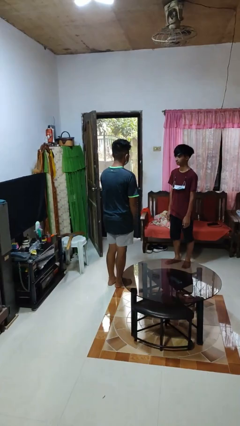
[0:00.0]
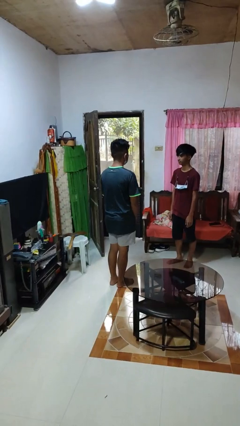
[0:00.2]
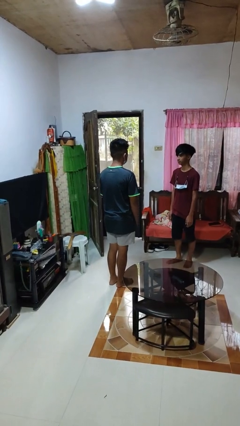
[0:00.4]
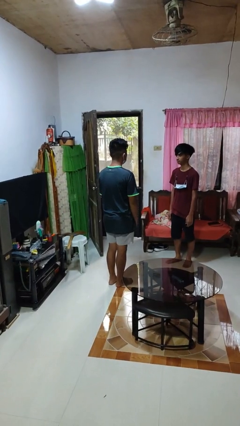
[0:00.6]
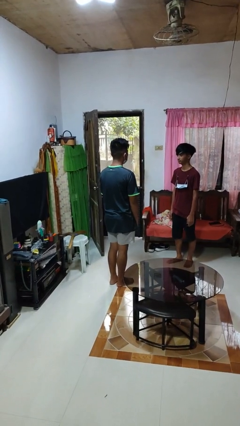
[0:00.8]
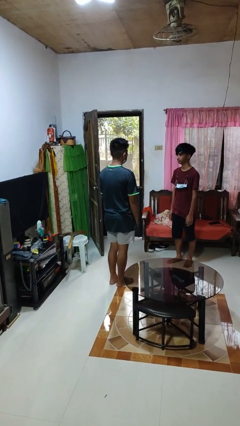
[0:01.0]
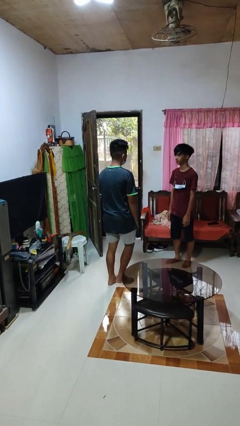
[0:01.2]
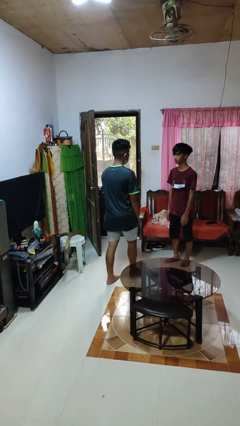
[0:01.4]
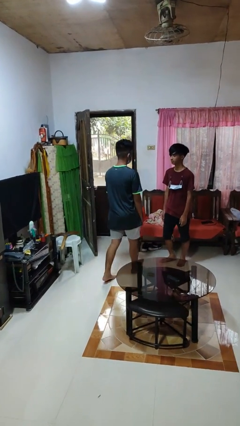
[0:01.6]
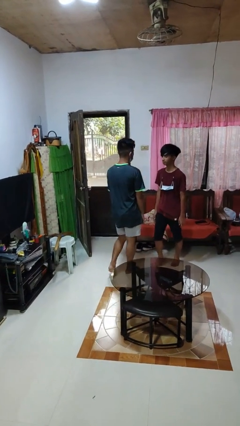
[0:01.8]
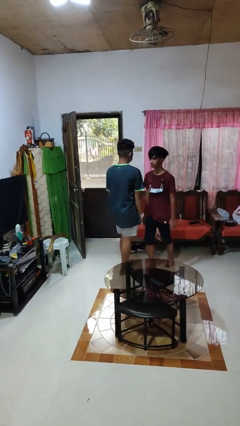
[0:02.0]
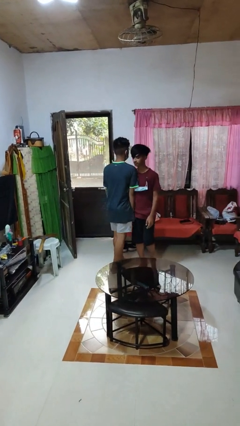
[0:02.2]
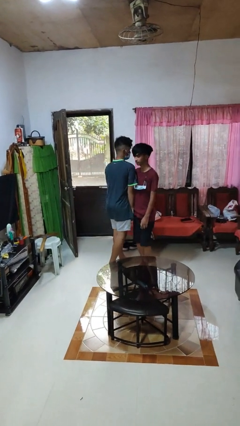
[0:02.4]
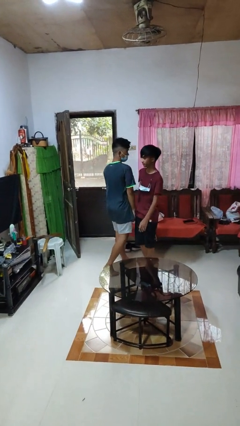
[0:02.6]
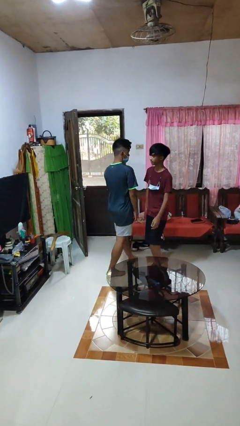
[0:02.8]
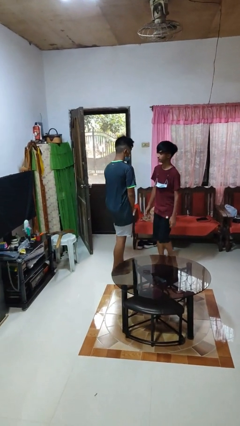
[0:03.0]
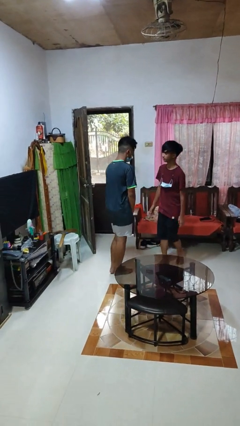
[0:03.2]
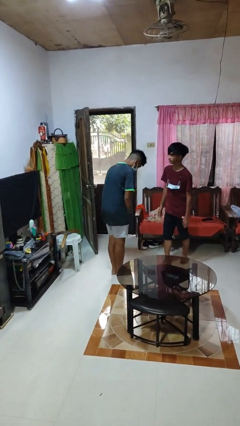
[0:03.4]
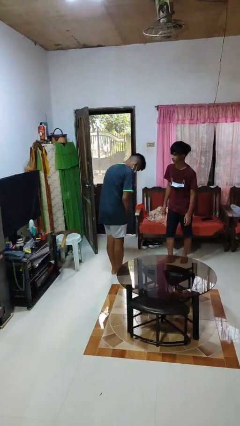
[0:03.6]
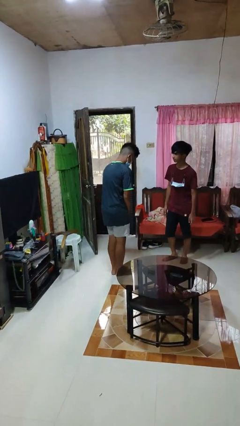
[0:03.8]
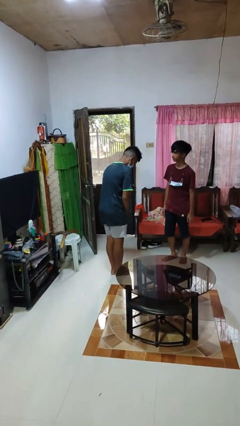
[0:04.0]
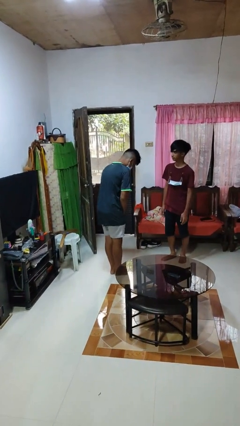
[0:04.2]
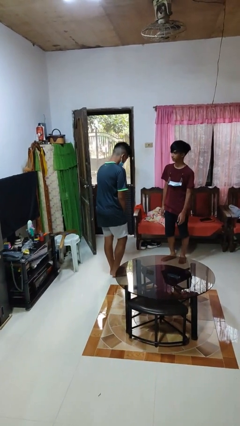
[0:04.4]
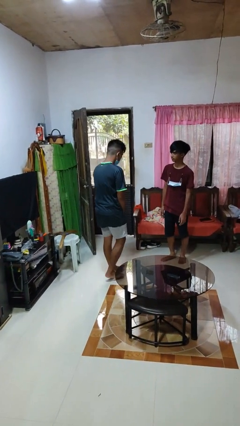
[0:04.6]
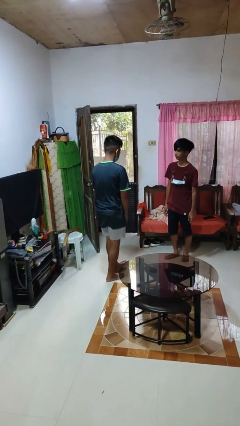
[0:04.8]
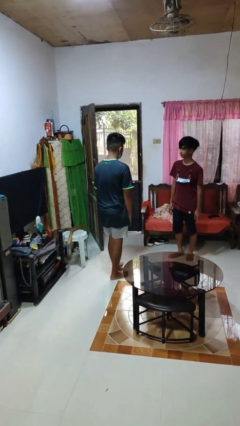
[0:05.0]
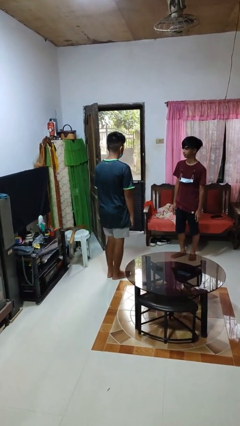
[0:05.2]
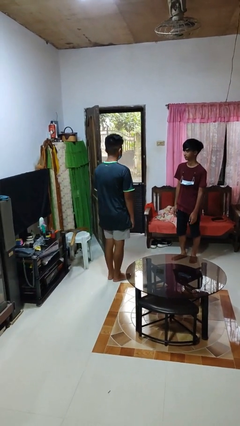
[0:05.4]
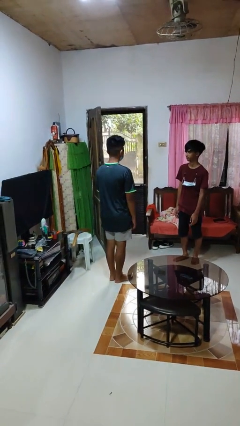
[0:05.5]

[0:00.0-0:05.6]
person bumps into person

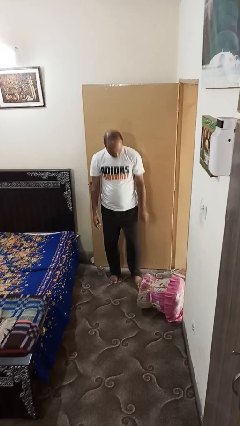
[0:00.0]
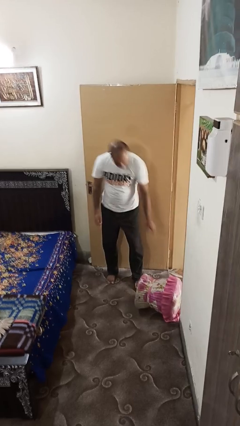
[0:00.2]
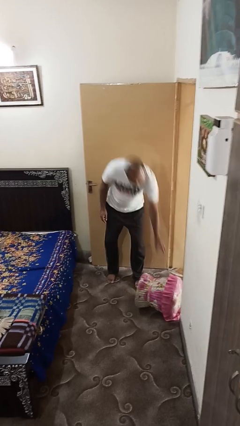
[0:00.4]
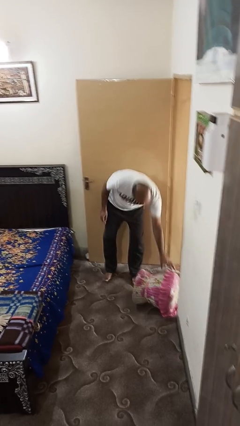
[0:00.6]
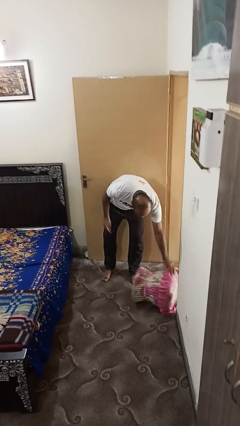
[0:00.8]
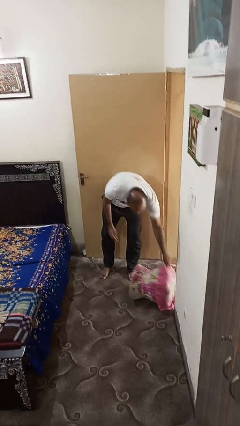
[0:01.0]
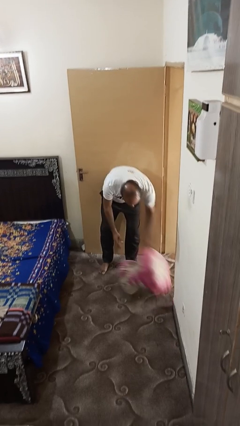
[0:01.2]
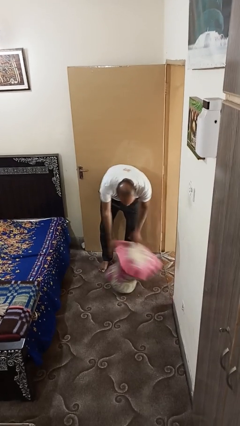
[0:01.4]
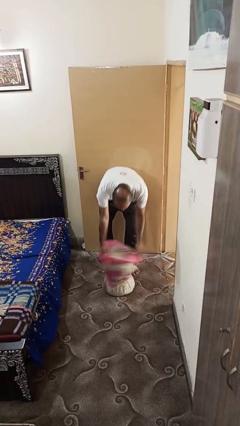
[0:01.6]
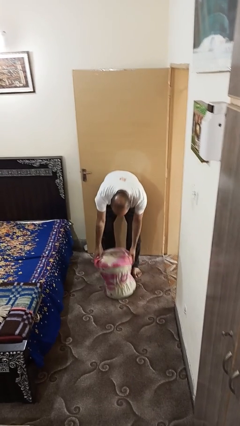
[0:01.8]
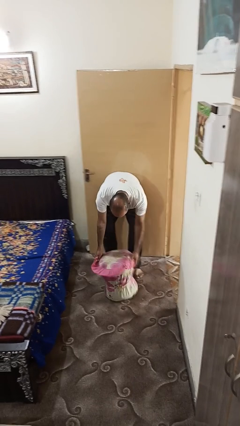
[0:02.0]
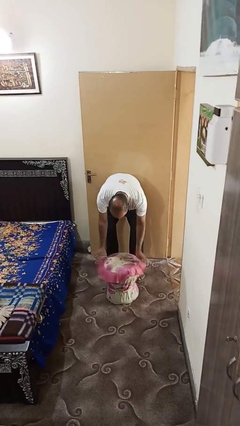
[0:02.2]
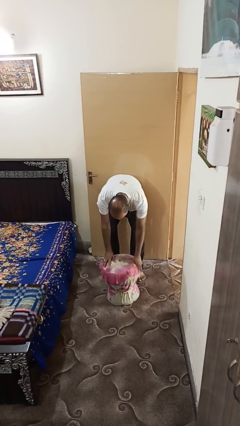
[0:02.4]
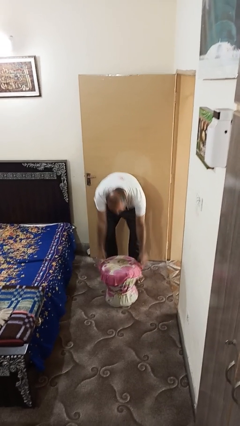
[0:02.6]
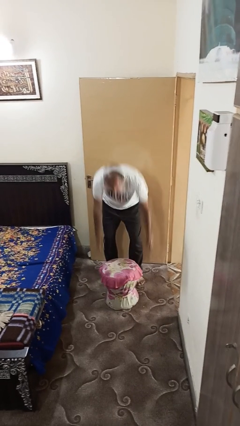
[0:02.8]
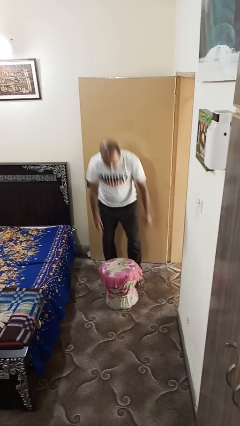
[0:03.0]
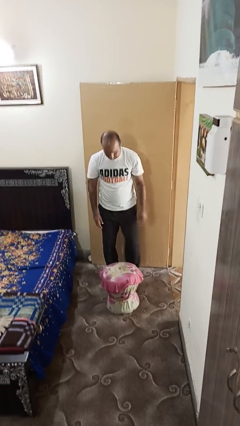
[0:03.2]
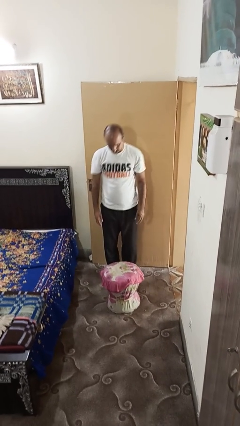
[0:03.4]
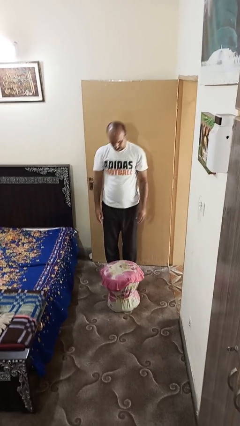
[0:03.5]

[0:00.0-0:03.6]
person sets upright furniture

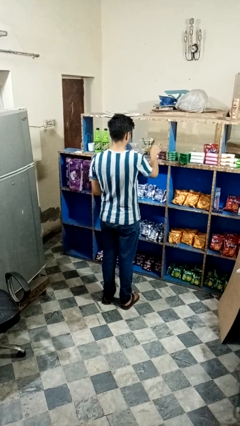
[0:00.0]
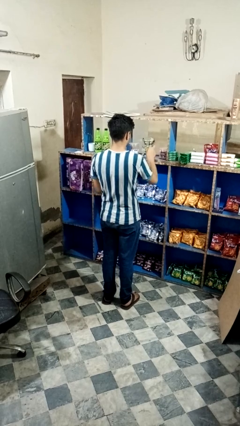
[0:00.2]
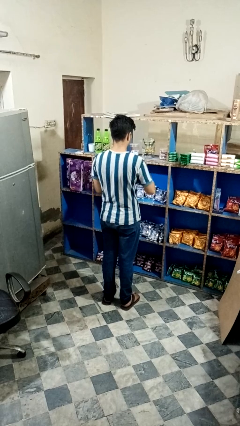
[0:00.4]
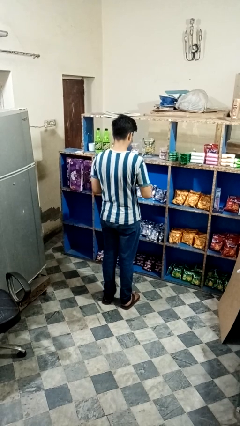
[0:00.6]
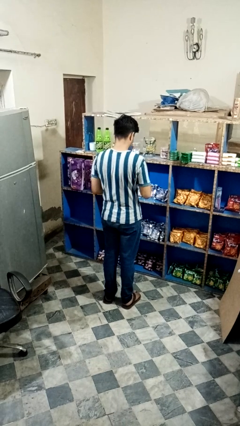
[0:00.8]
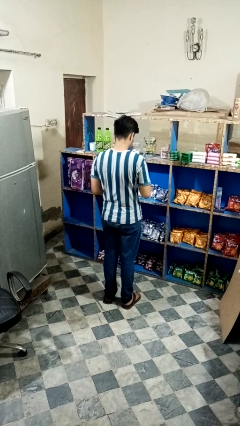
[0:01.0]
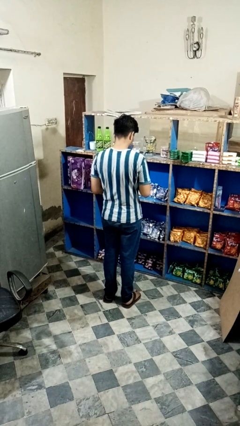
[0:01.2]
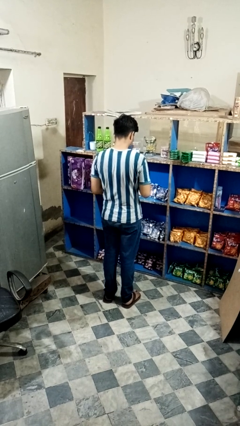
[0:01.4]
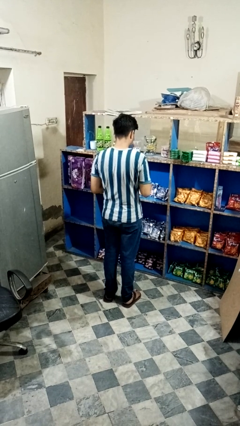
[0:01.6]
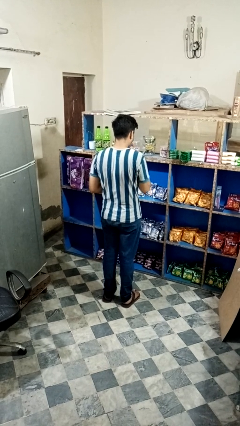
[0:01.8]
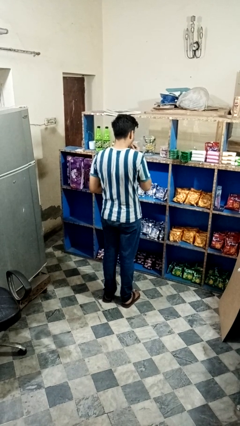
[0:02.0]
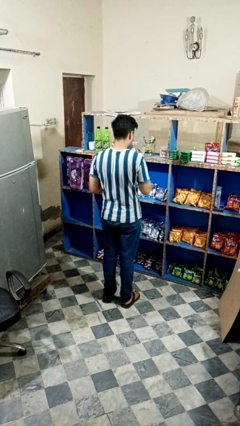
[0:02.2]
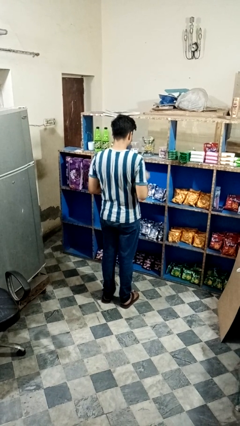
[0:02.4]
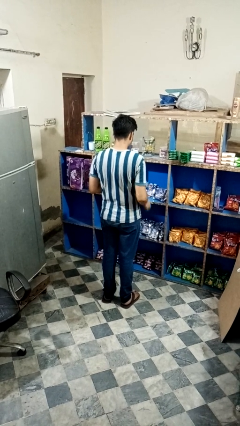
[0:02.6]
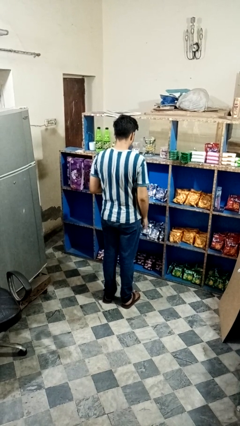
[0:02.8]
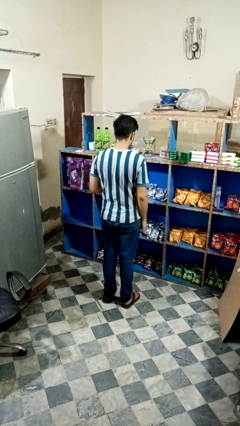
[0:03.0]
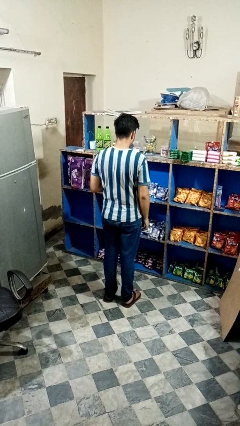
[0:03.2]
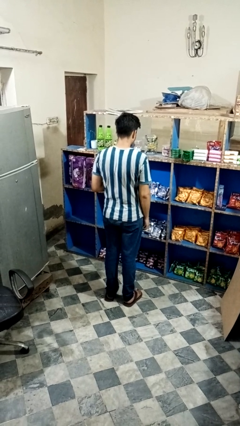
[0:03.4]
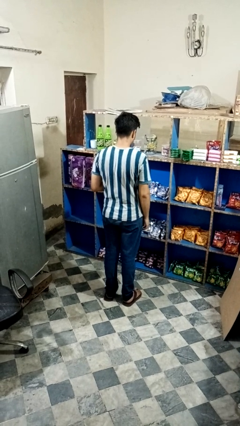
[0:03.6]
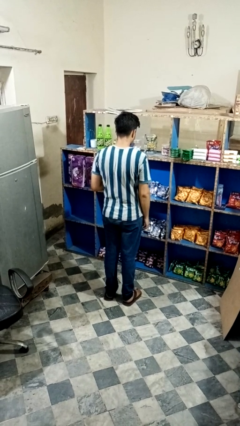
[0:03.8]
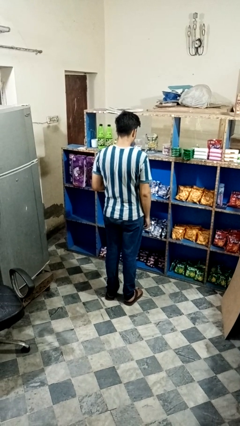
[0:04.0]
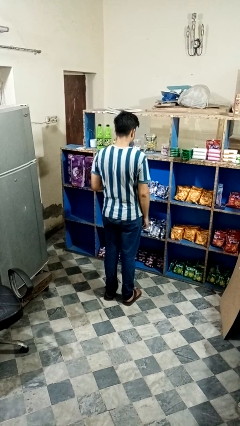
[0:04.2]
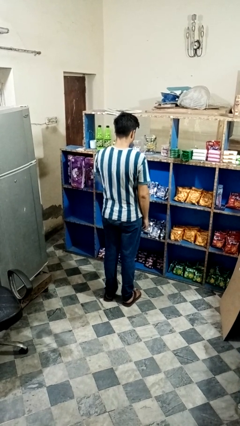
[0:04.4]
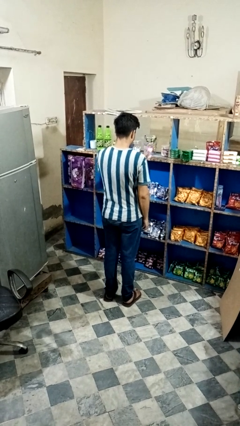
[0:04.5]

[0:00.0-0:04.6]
person eats snack from bag

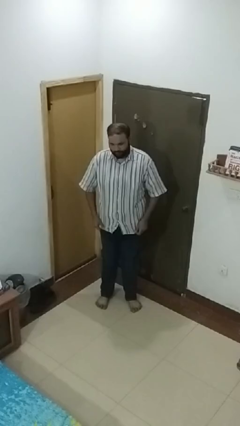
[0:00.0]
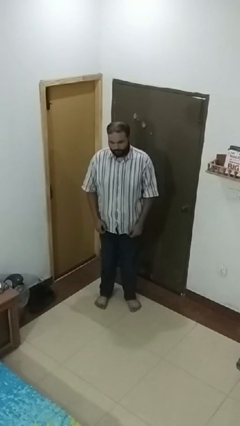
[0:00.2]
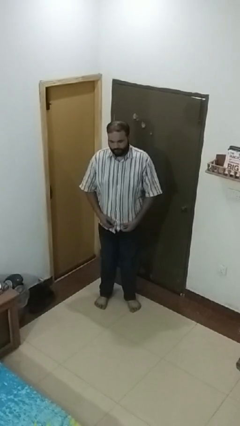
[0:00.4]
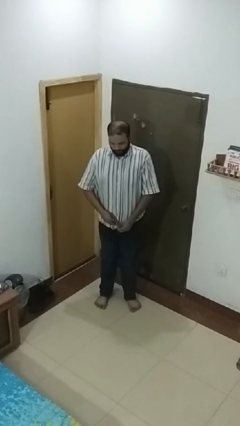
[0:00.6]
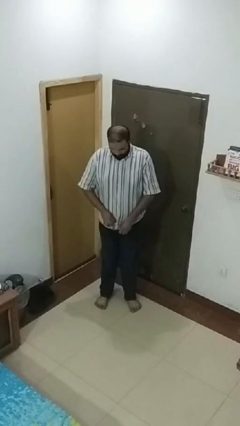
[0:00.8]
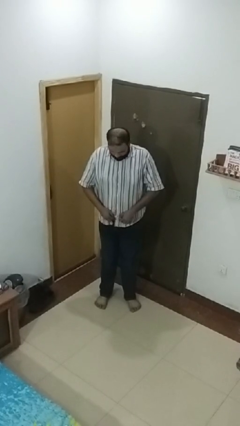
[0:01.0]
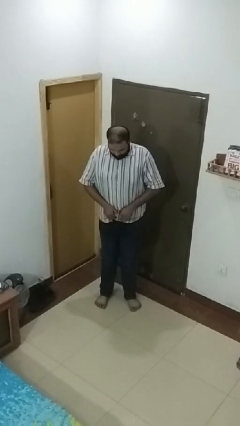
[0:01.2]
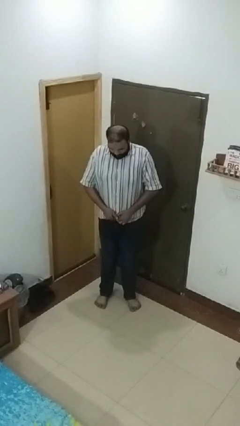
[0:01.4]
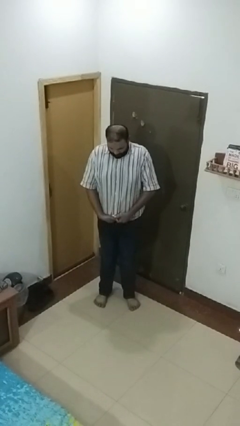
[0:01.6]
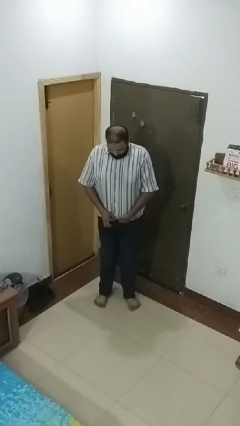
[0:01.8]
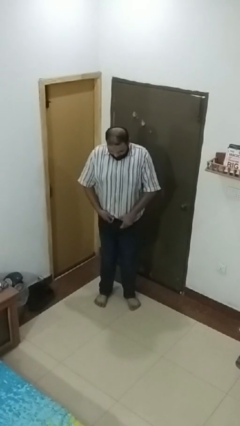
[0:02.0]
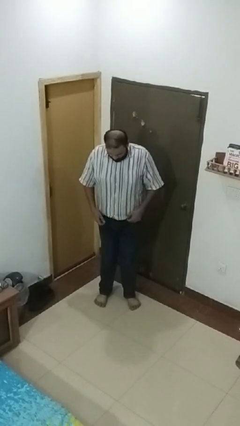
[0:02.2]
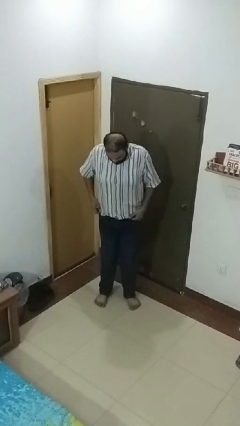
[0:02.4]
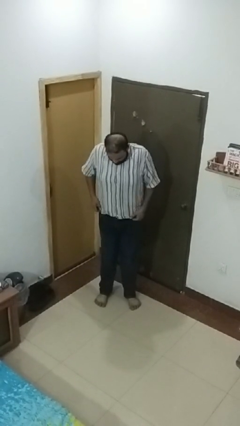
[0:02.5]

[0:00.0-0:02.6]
person tucks in shirt

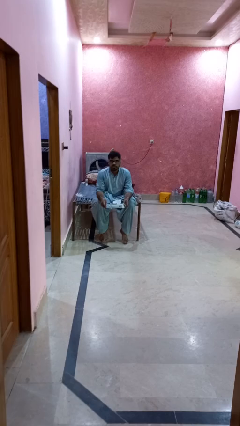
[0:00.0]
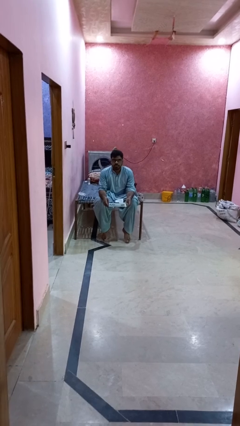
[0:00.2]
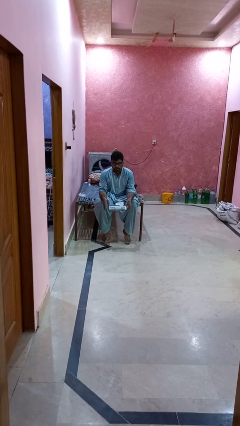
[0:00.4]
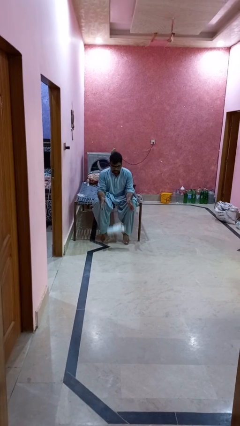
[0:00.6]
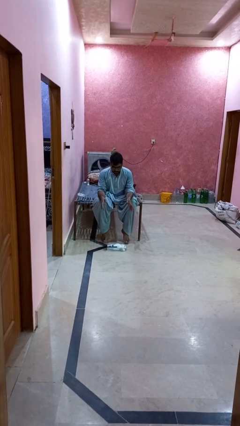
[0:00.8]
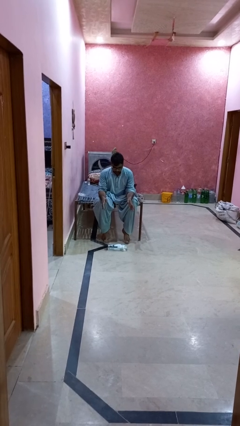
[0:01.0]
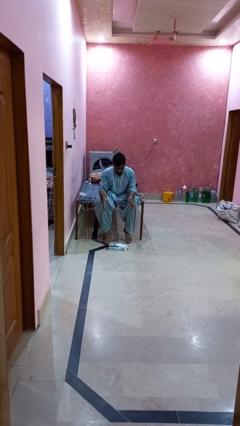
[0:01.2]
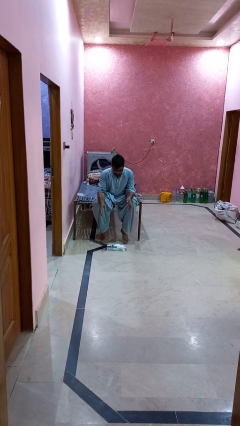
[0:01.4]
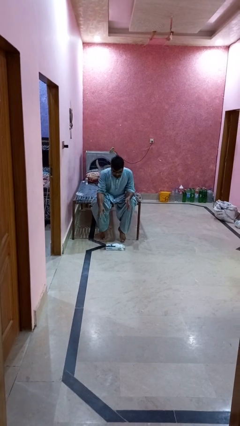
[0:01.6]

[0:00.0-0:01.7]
person drops object
